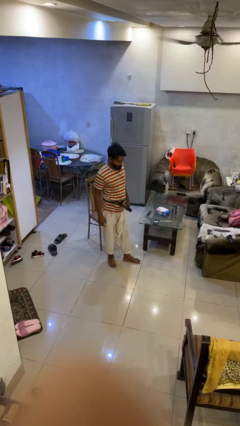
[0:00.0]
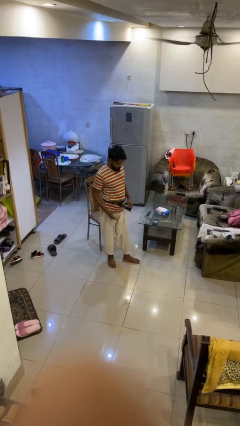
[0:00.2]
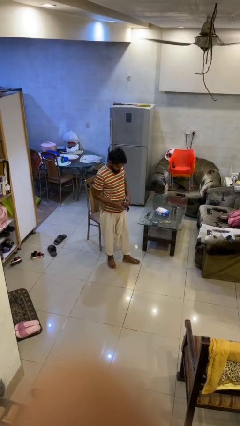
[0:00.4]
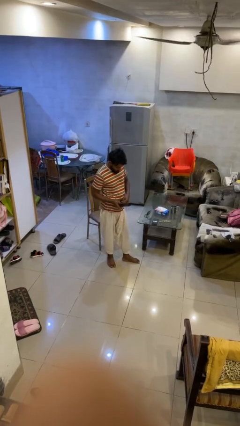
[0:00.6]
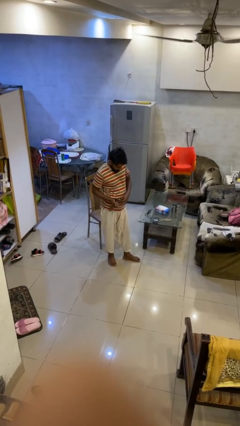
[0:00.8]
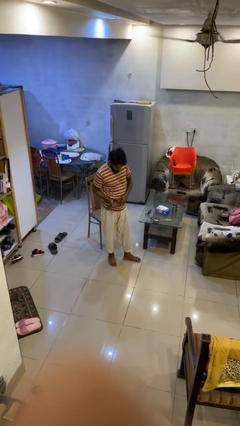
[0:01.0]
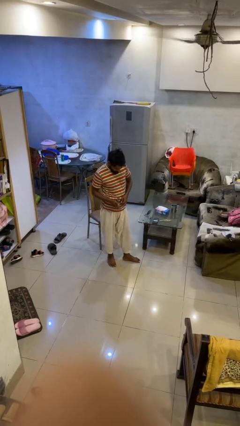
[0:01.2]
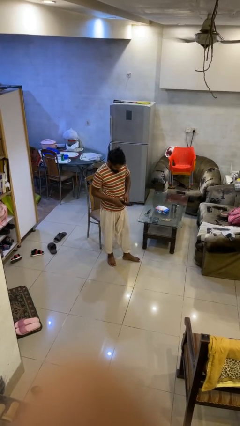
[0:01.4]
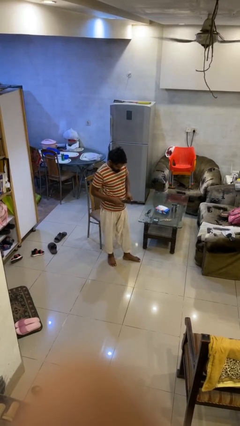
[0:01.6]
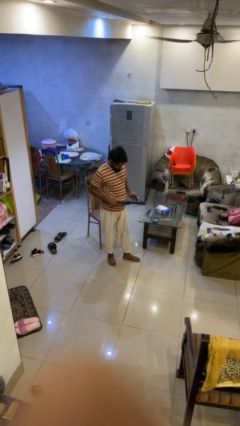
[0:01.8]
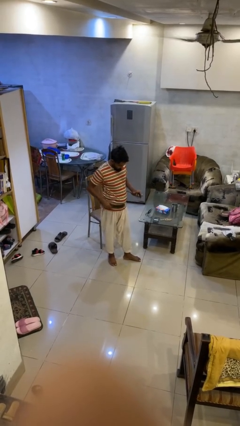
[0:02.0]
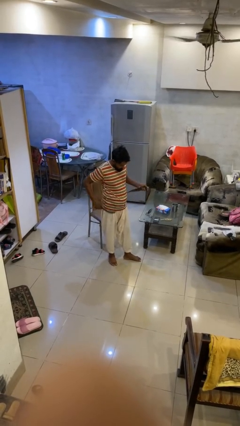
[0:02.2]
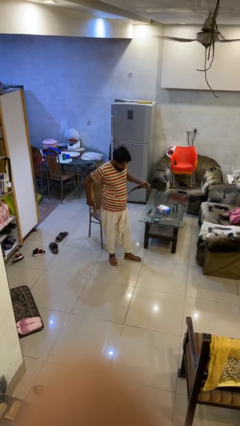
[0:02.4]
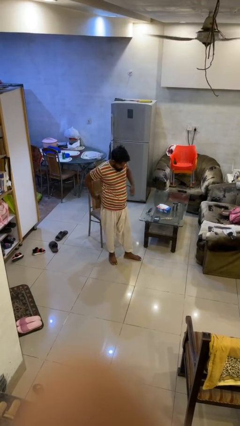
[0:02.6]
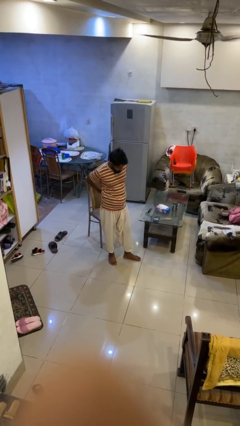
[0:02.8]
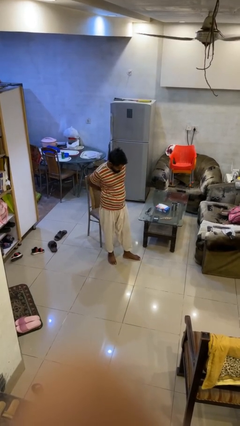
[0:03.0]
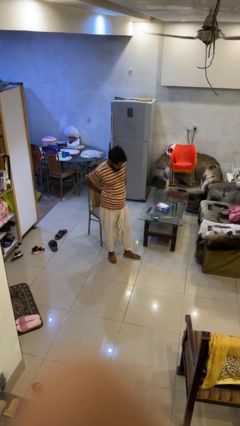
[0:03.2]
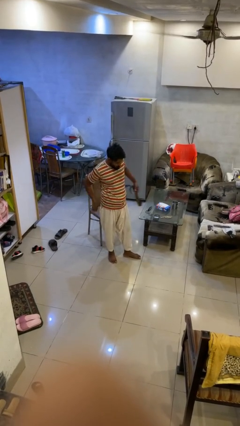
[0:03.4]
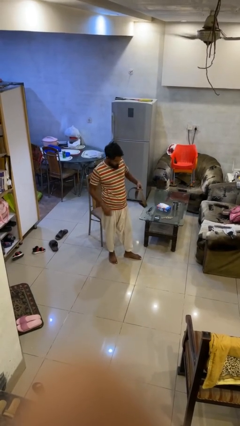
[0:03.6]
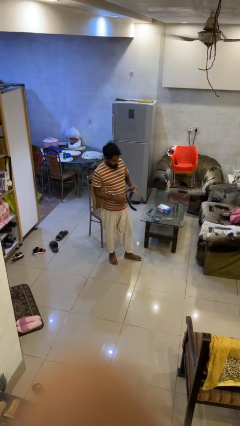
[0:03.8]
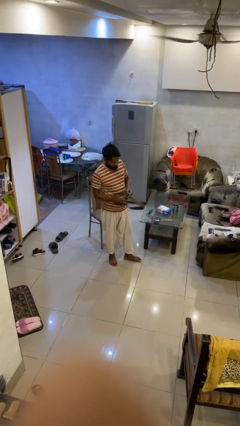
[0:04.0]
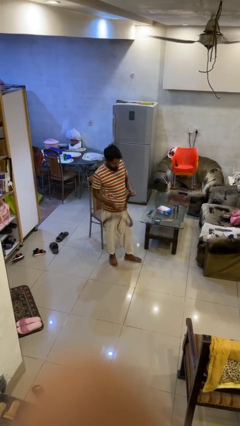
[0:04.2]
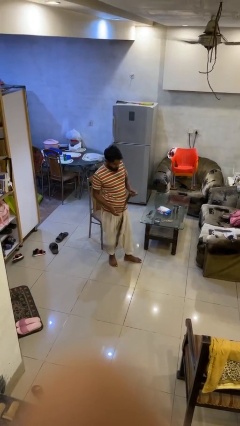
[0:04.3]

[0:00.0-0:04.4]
person takes off belt

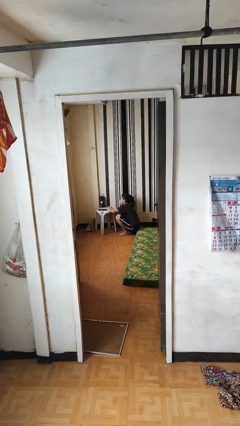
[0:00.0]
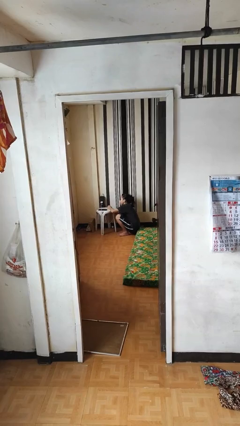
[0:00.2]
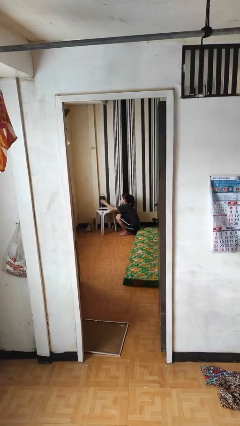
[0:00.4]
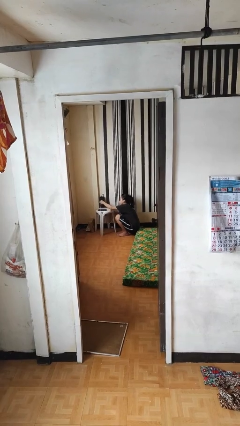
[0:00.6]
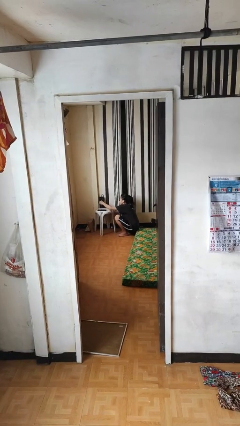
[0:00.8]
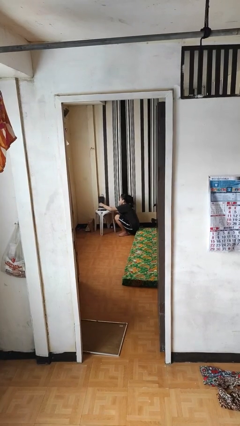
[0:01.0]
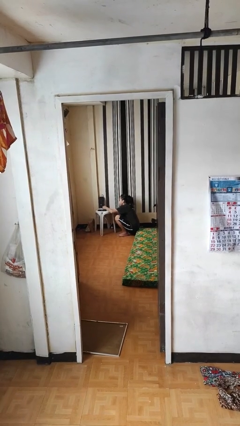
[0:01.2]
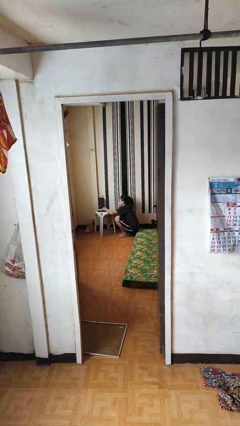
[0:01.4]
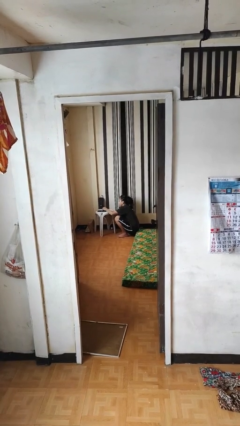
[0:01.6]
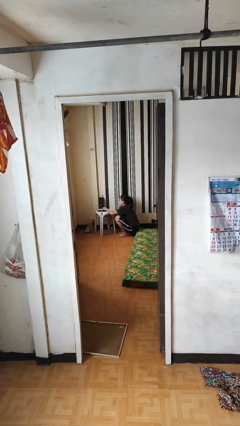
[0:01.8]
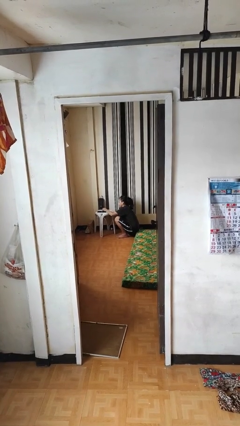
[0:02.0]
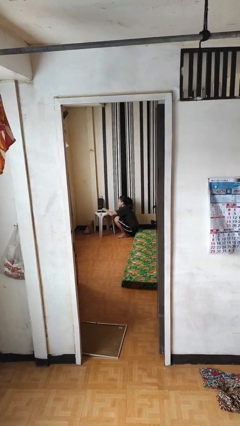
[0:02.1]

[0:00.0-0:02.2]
person unplugs from electrical socket

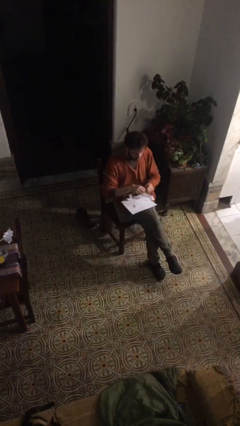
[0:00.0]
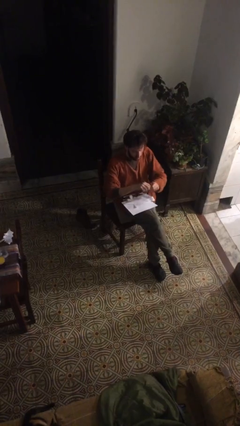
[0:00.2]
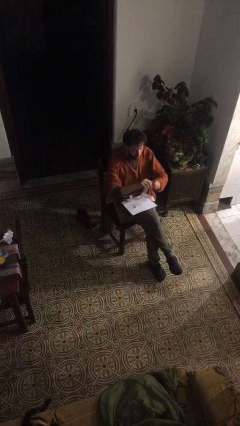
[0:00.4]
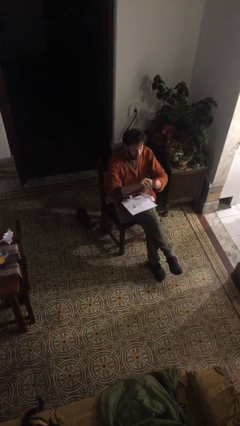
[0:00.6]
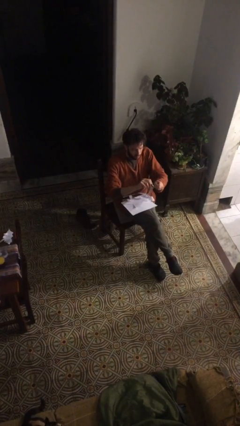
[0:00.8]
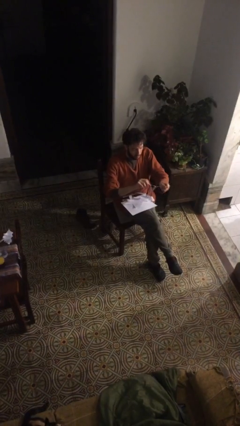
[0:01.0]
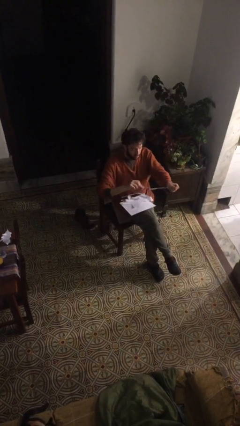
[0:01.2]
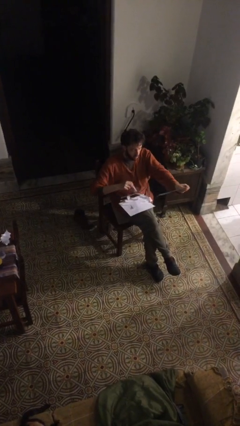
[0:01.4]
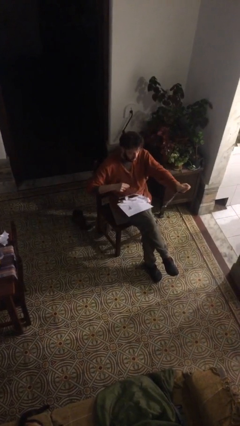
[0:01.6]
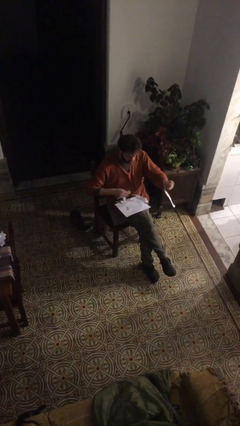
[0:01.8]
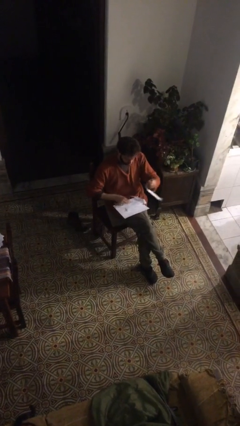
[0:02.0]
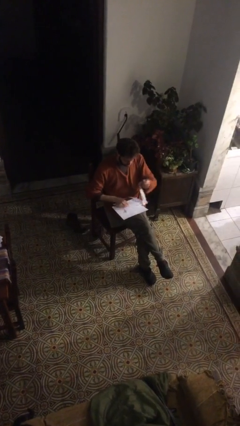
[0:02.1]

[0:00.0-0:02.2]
person tears paper

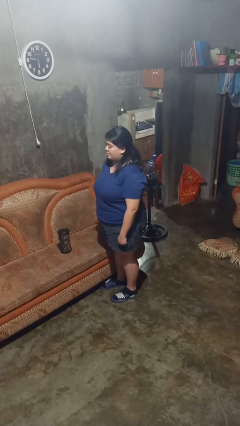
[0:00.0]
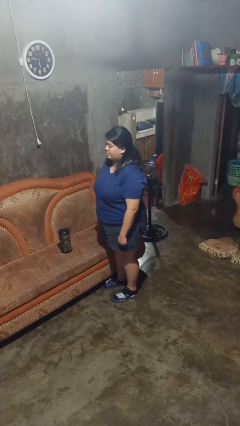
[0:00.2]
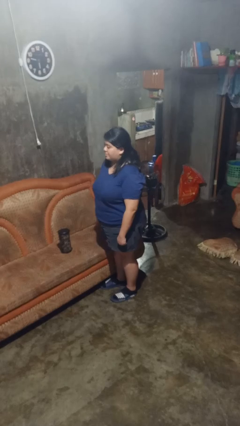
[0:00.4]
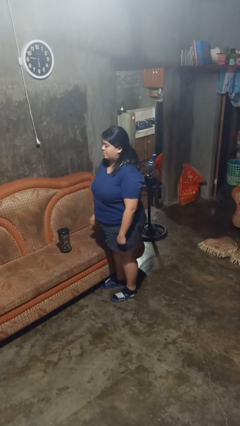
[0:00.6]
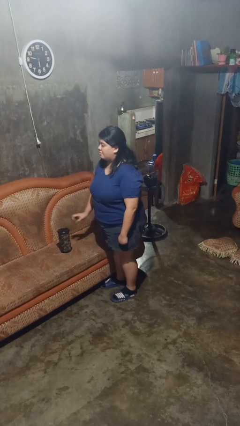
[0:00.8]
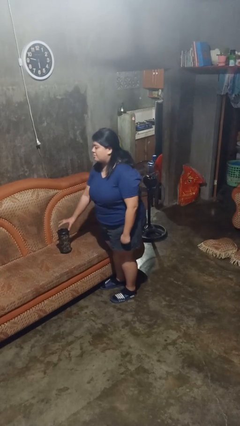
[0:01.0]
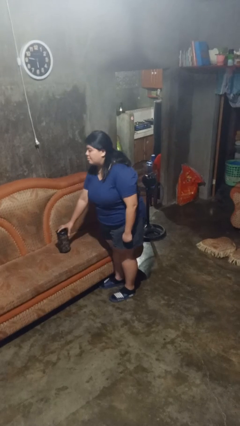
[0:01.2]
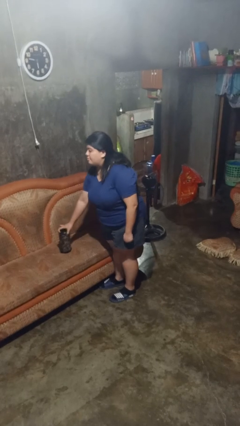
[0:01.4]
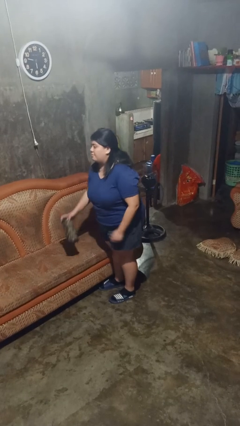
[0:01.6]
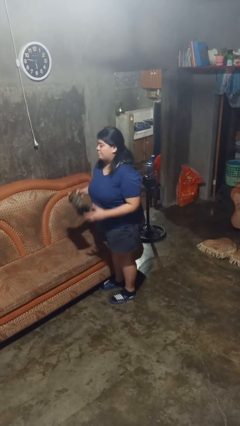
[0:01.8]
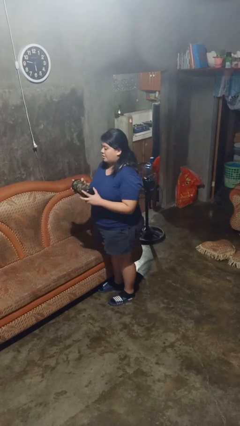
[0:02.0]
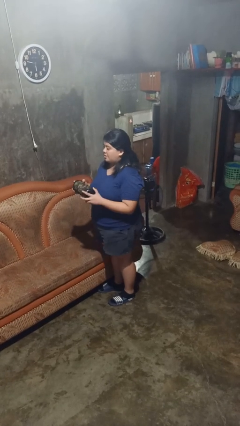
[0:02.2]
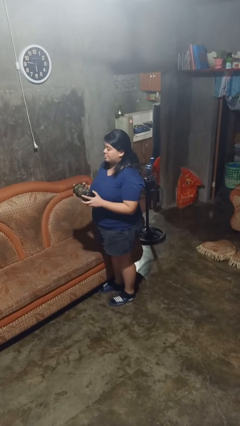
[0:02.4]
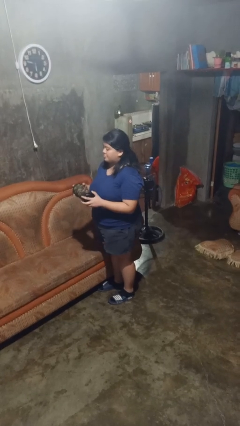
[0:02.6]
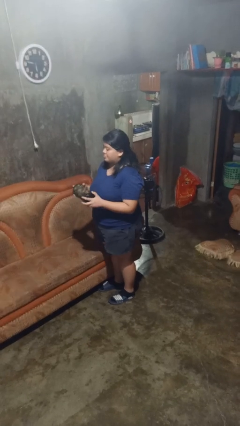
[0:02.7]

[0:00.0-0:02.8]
person picks up object from couch

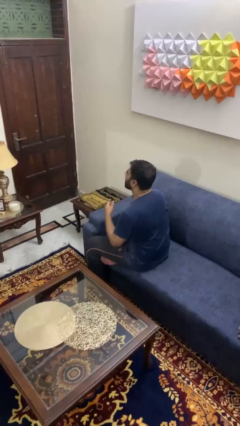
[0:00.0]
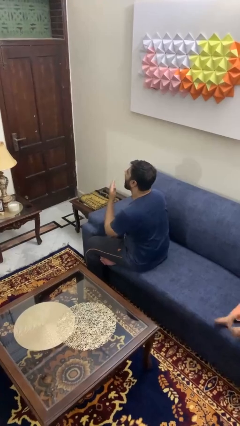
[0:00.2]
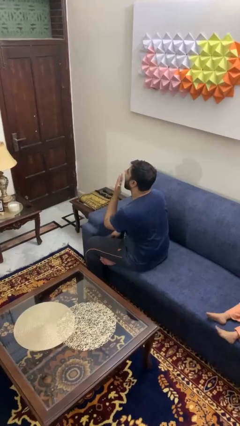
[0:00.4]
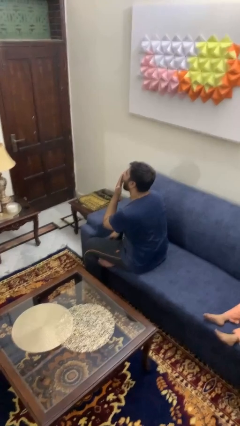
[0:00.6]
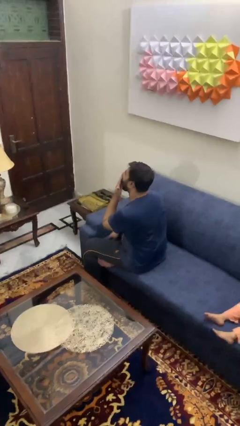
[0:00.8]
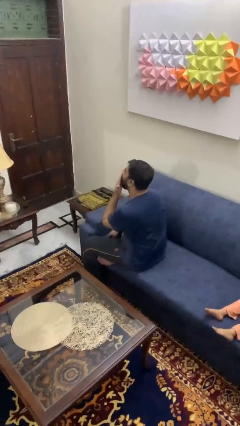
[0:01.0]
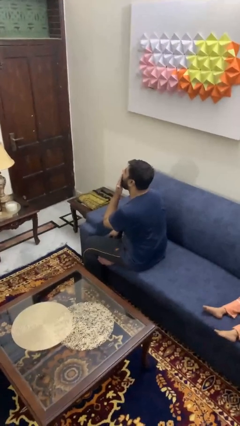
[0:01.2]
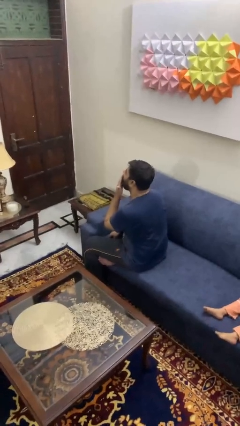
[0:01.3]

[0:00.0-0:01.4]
person yawns

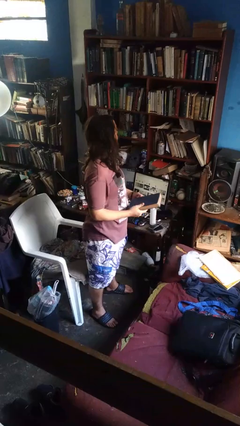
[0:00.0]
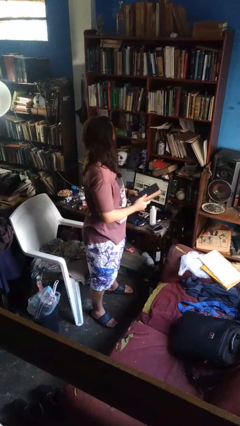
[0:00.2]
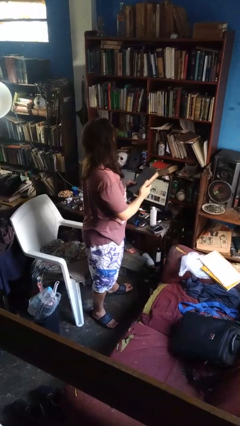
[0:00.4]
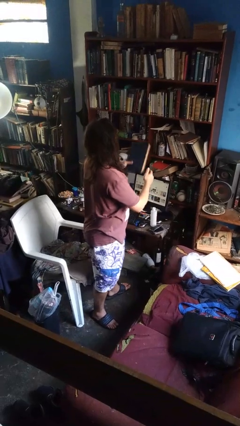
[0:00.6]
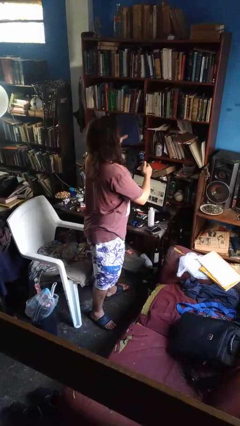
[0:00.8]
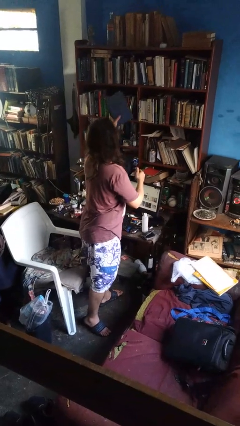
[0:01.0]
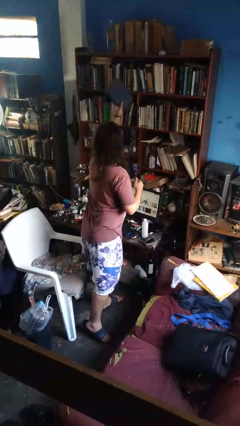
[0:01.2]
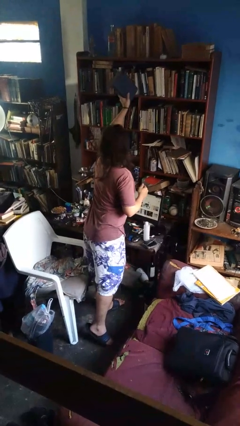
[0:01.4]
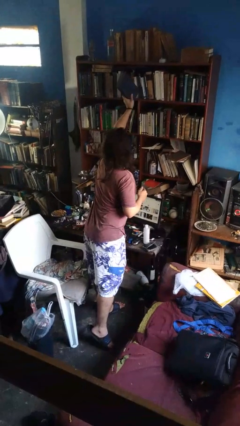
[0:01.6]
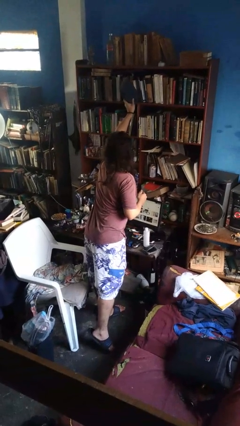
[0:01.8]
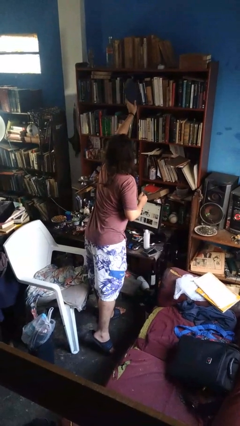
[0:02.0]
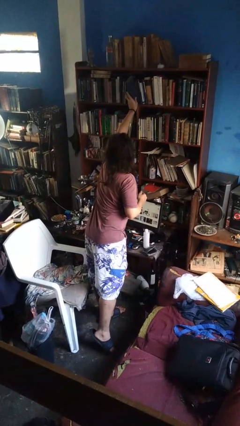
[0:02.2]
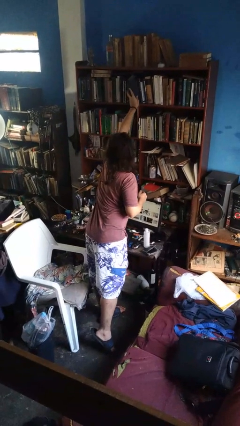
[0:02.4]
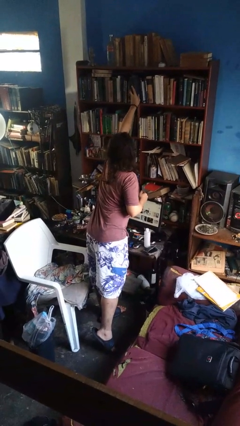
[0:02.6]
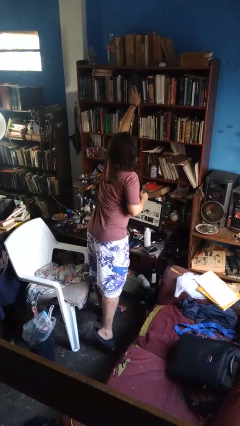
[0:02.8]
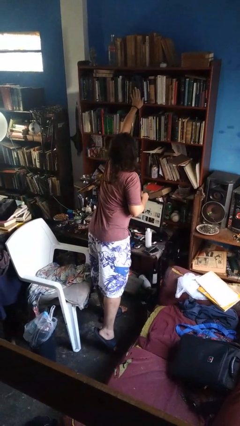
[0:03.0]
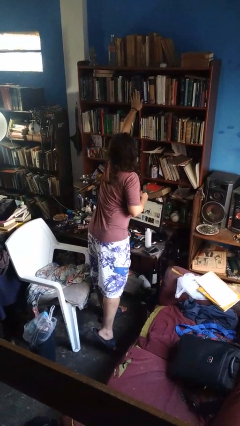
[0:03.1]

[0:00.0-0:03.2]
person puts down object on shelf

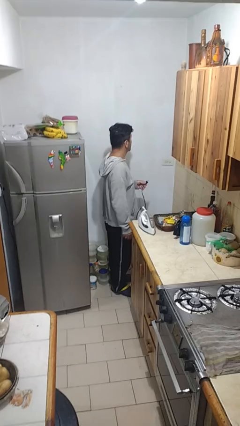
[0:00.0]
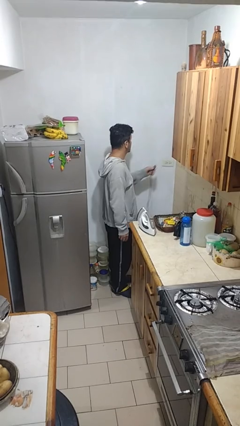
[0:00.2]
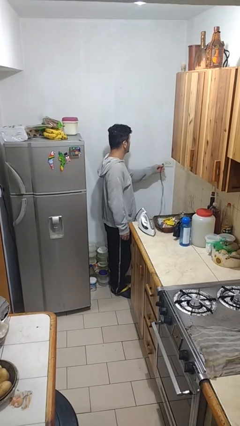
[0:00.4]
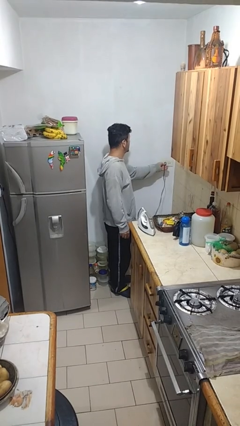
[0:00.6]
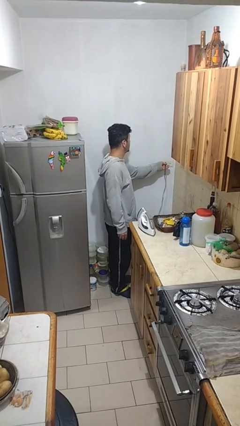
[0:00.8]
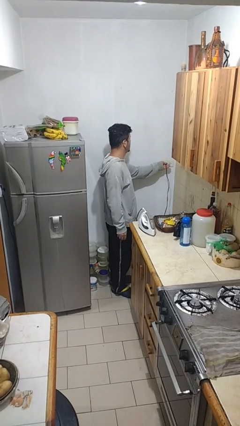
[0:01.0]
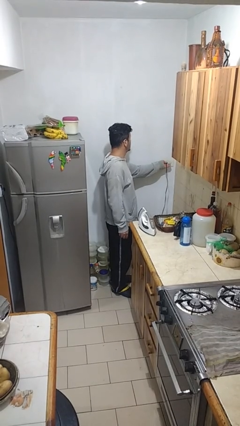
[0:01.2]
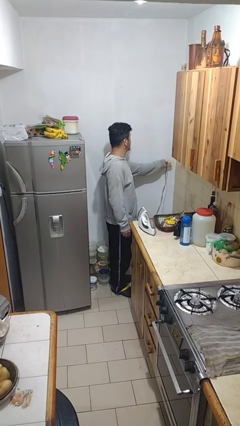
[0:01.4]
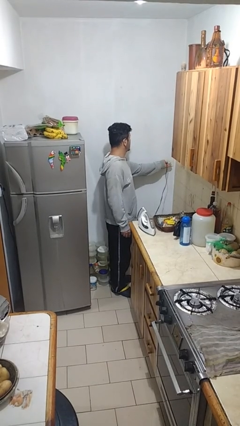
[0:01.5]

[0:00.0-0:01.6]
person plugs into electrical socket
